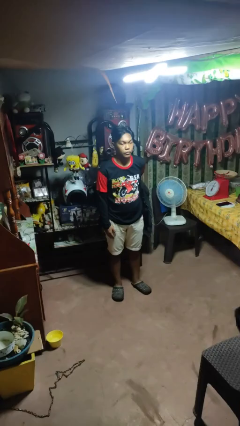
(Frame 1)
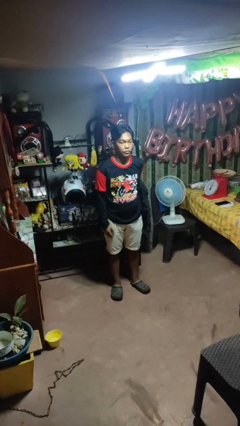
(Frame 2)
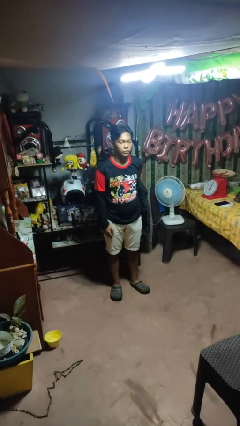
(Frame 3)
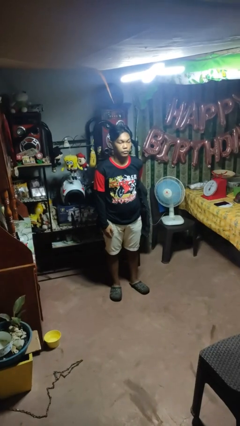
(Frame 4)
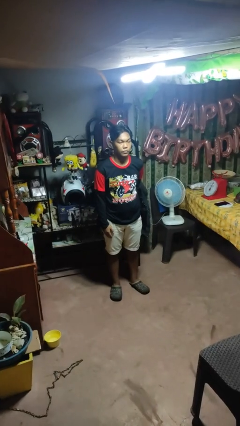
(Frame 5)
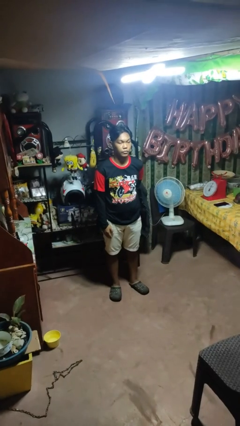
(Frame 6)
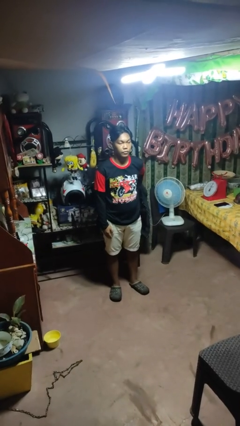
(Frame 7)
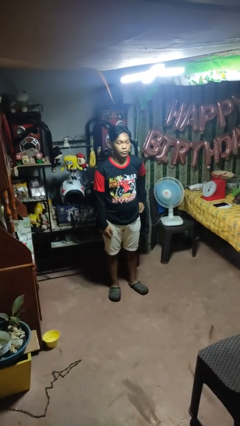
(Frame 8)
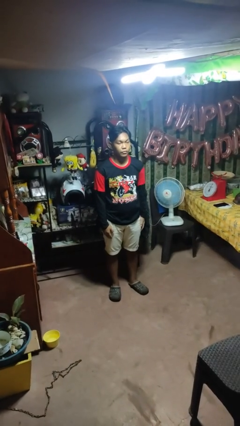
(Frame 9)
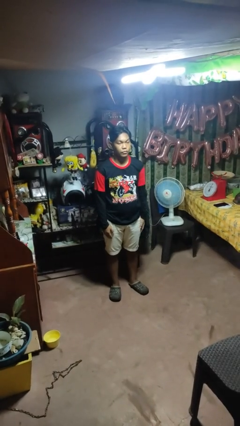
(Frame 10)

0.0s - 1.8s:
person puts hands in back pockets

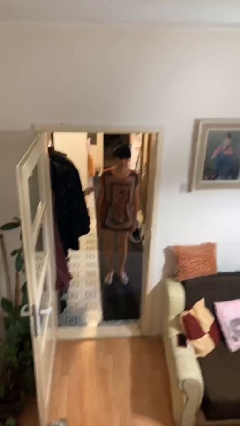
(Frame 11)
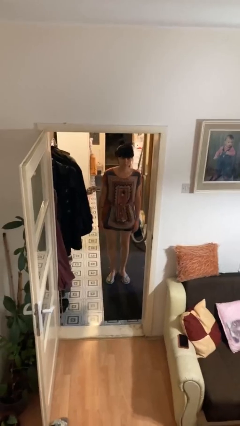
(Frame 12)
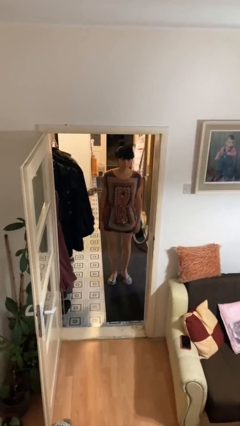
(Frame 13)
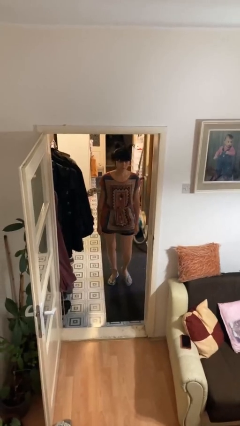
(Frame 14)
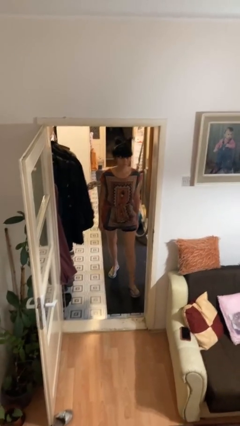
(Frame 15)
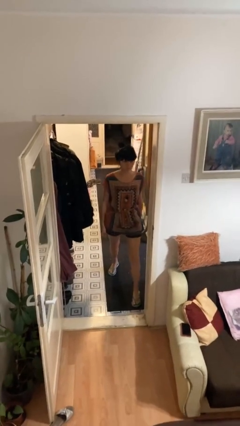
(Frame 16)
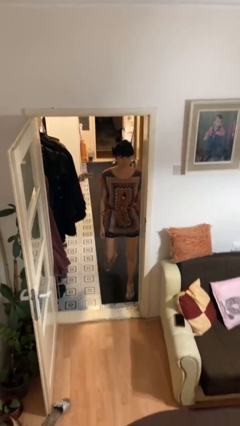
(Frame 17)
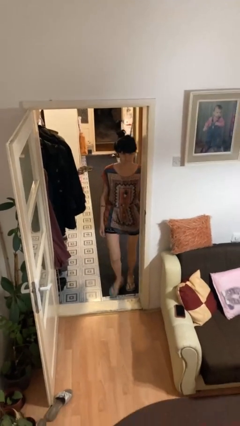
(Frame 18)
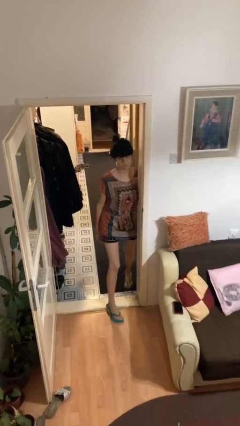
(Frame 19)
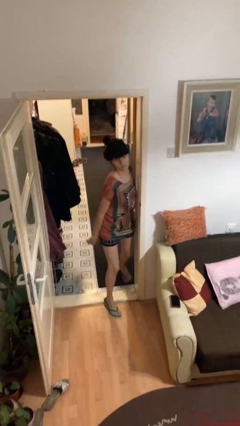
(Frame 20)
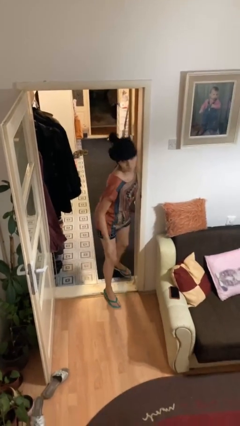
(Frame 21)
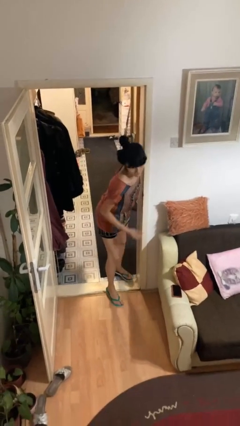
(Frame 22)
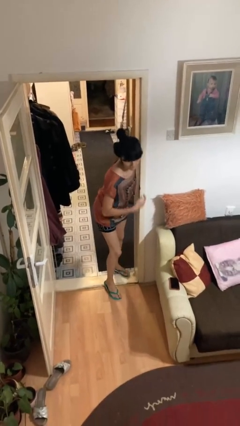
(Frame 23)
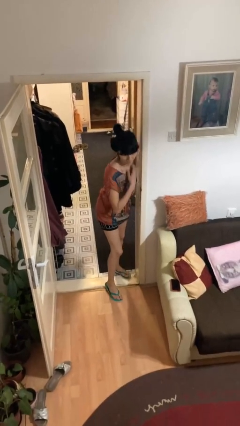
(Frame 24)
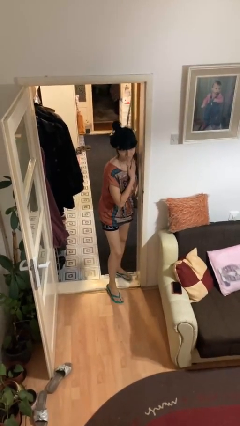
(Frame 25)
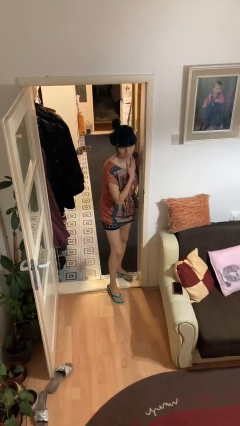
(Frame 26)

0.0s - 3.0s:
person bumps into wall

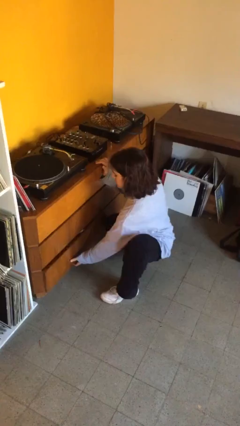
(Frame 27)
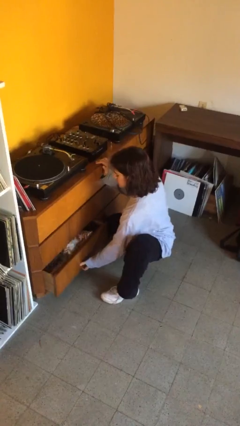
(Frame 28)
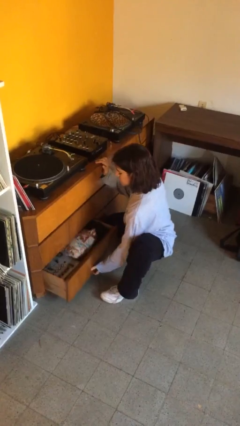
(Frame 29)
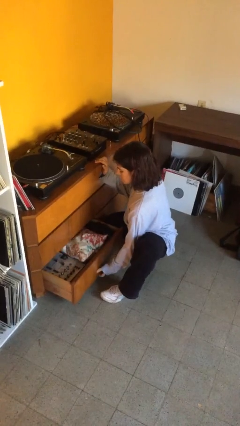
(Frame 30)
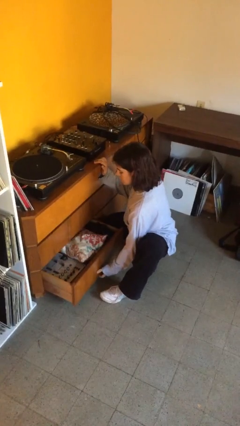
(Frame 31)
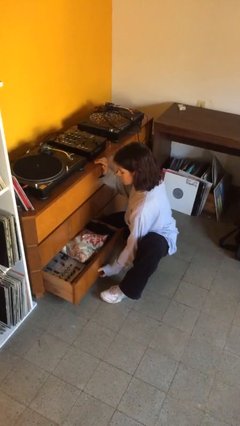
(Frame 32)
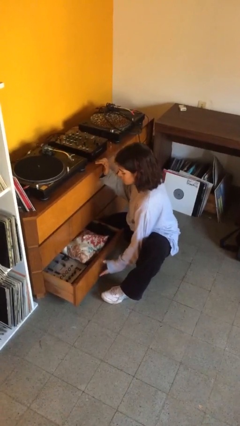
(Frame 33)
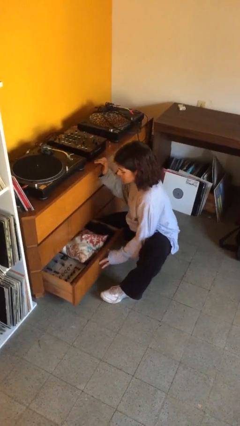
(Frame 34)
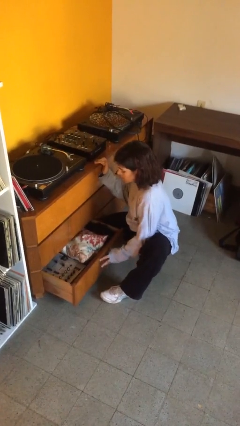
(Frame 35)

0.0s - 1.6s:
person opens dresser drawer

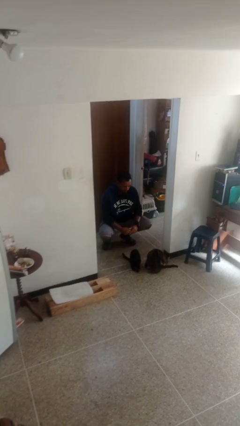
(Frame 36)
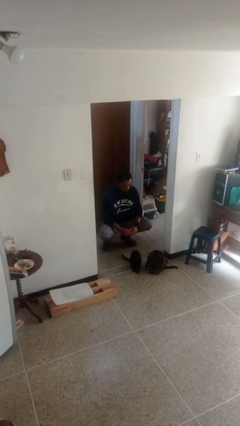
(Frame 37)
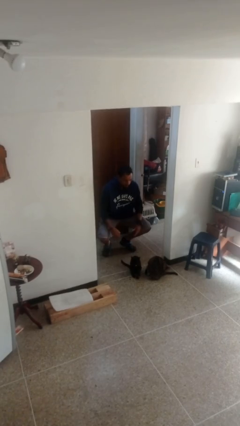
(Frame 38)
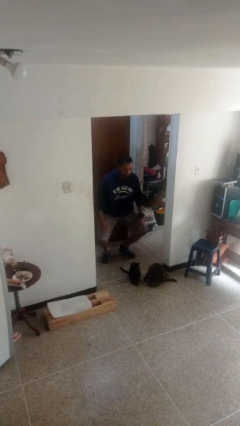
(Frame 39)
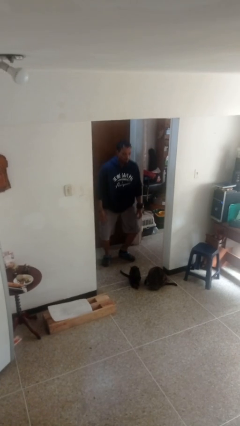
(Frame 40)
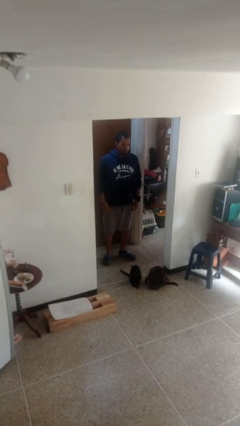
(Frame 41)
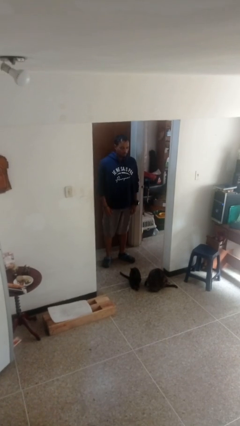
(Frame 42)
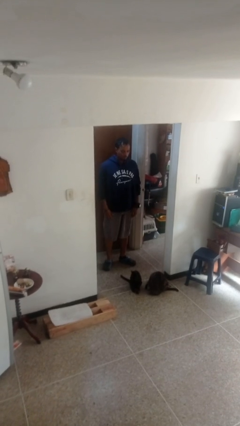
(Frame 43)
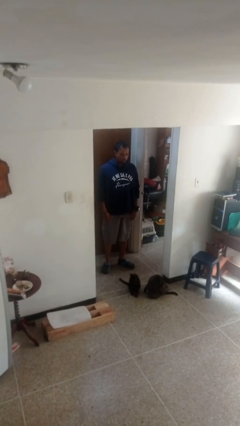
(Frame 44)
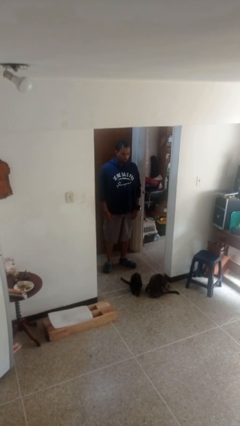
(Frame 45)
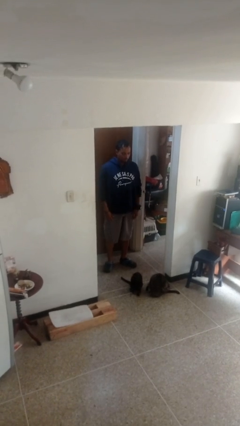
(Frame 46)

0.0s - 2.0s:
person stands up

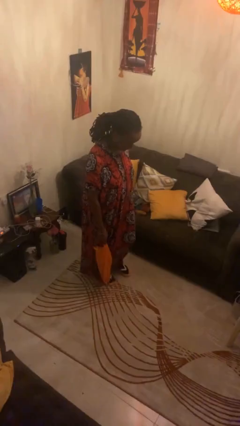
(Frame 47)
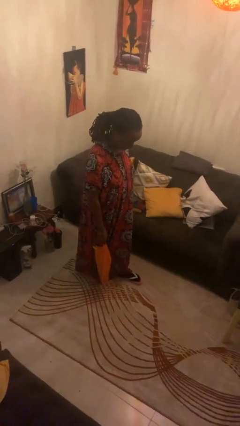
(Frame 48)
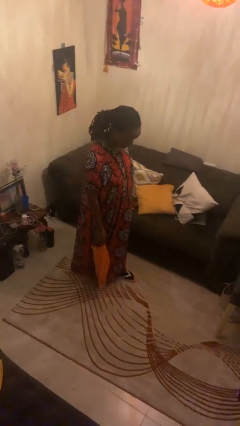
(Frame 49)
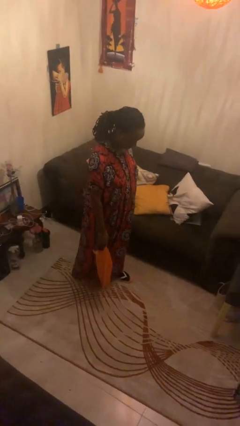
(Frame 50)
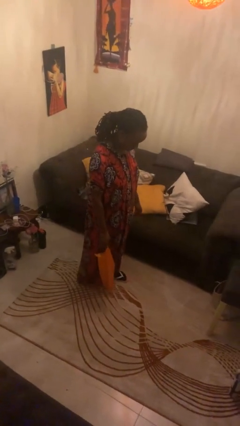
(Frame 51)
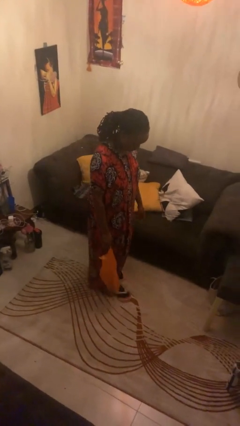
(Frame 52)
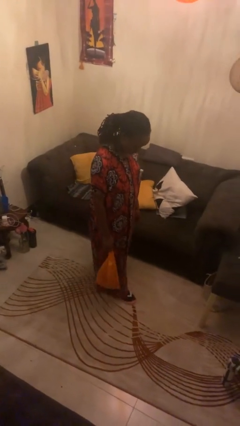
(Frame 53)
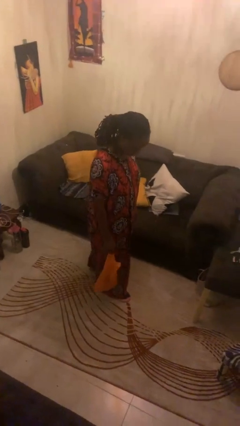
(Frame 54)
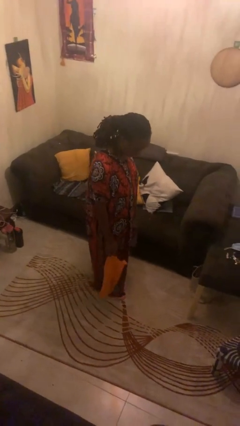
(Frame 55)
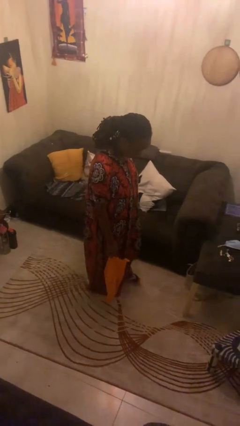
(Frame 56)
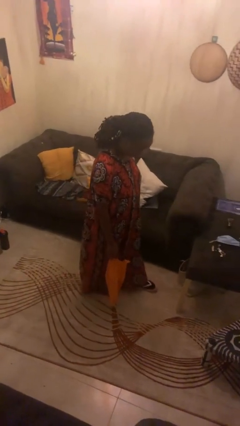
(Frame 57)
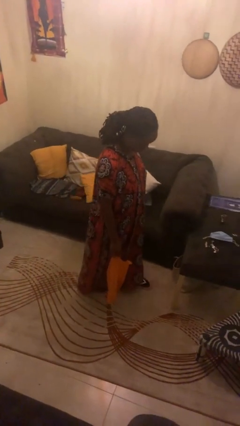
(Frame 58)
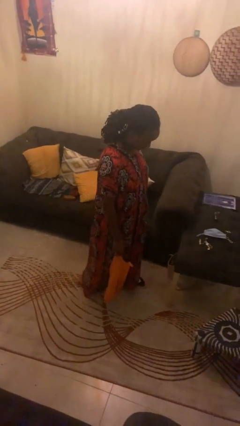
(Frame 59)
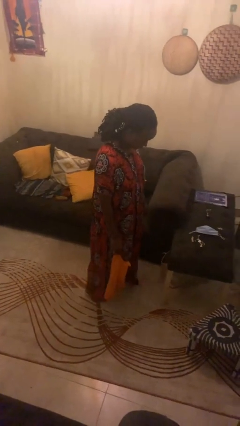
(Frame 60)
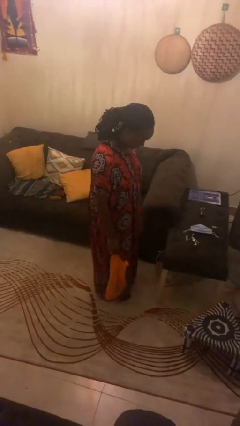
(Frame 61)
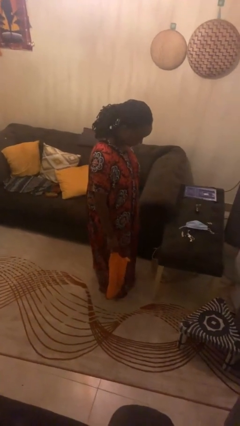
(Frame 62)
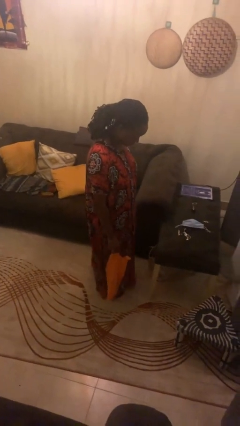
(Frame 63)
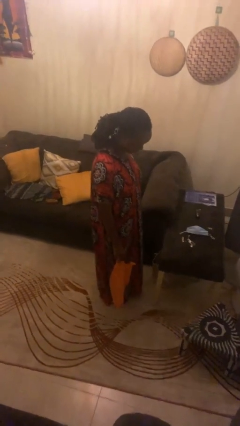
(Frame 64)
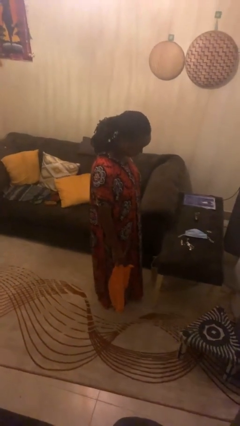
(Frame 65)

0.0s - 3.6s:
person carries groceries

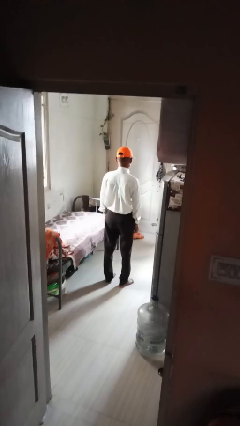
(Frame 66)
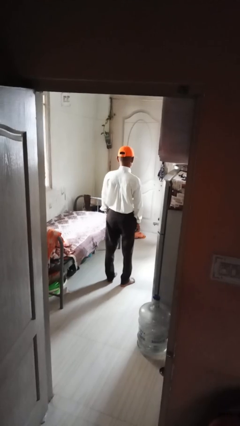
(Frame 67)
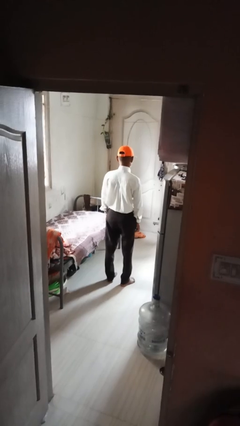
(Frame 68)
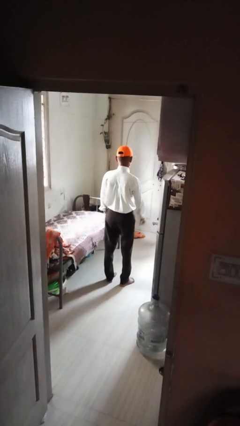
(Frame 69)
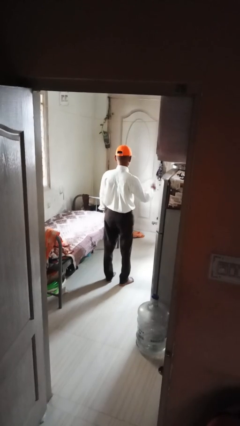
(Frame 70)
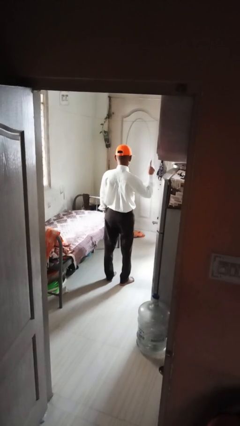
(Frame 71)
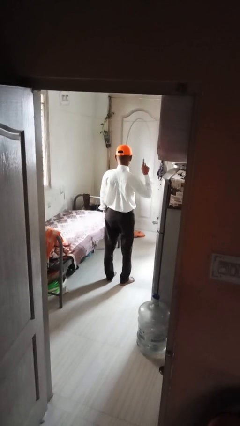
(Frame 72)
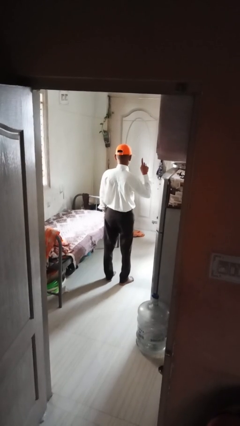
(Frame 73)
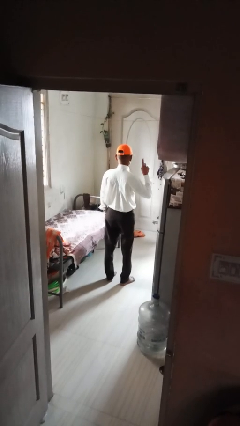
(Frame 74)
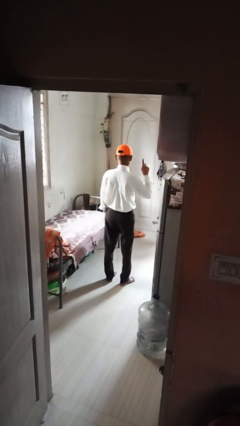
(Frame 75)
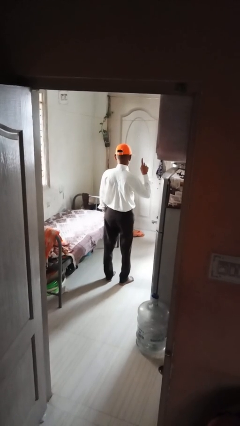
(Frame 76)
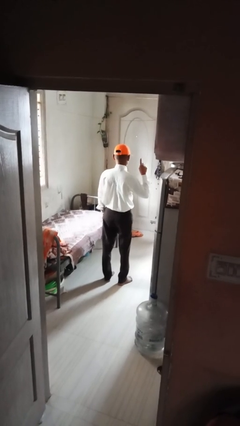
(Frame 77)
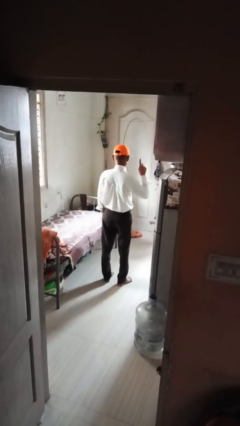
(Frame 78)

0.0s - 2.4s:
person gestures number one

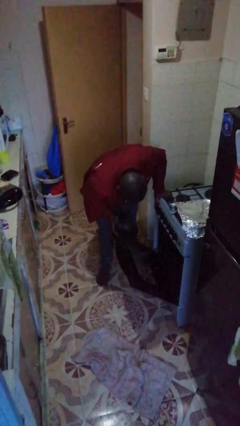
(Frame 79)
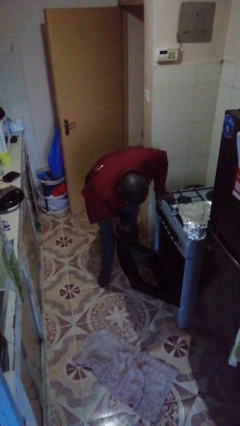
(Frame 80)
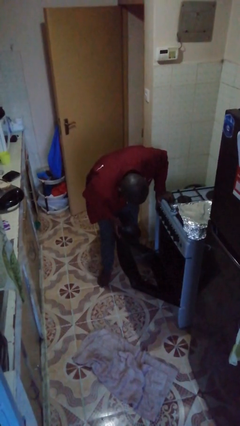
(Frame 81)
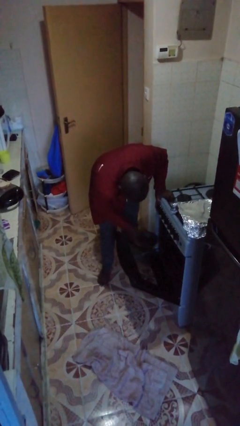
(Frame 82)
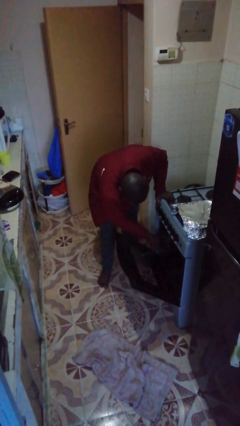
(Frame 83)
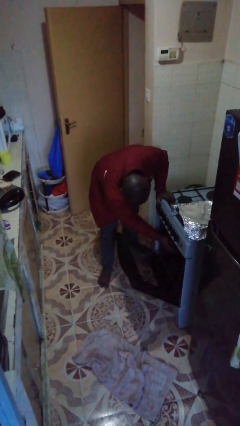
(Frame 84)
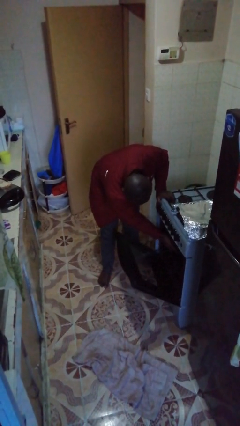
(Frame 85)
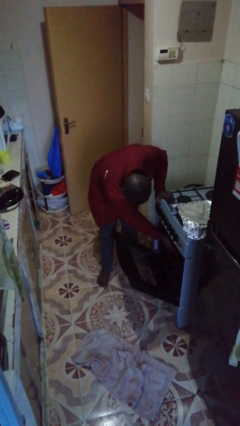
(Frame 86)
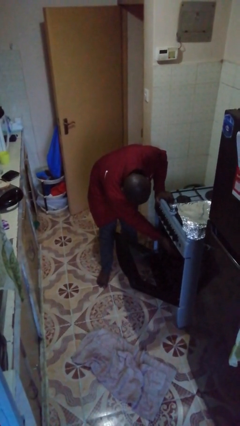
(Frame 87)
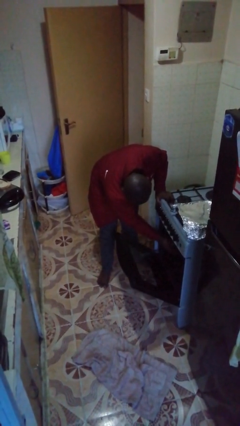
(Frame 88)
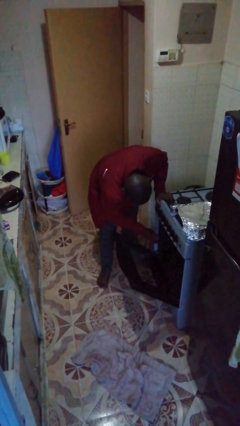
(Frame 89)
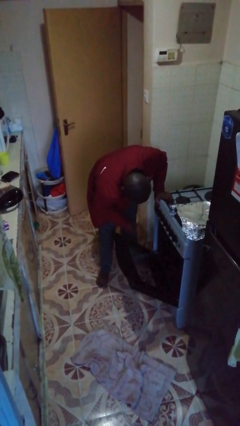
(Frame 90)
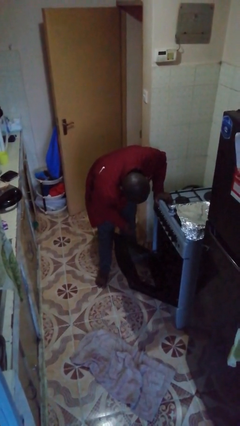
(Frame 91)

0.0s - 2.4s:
person puts object into oven
